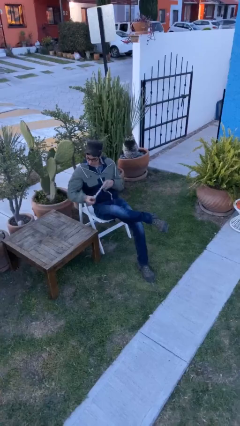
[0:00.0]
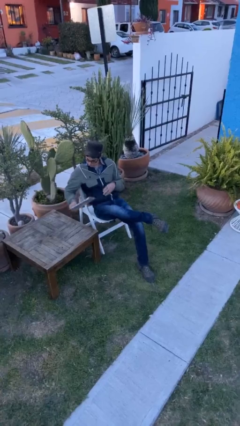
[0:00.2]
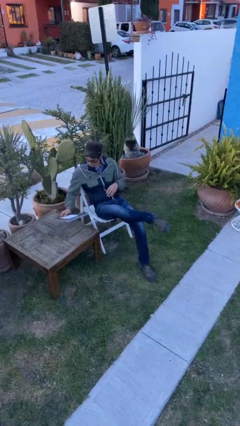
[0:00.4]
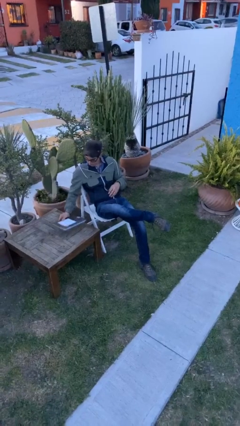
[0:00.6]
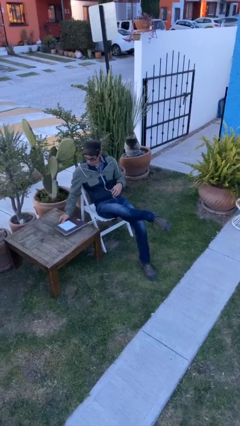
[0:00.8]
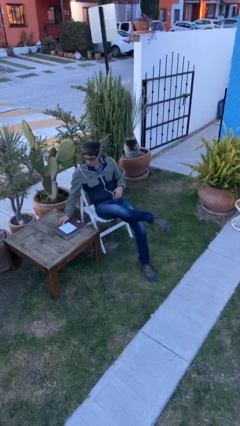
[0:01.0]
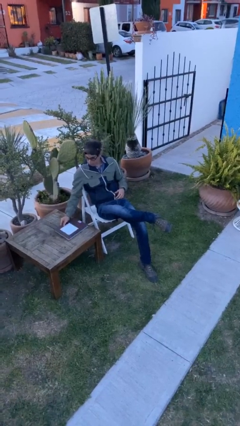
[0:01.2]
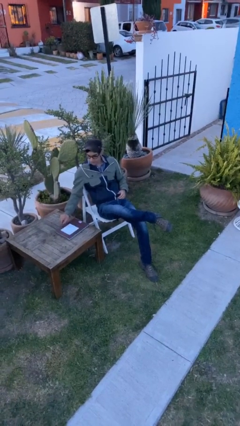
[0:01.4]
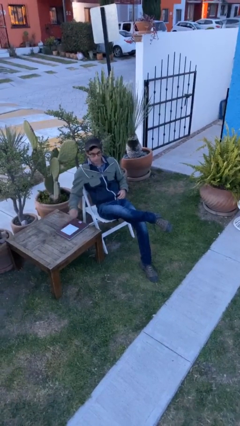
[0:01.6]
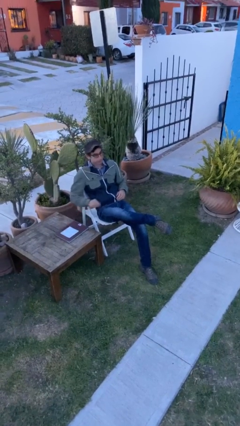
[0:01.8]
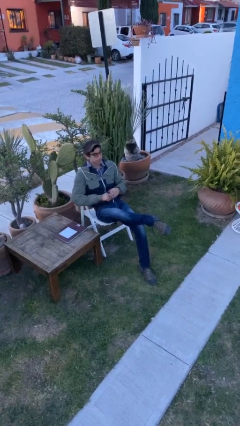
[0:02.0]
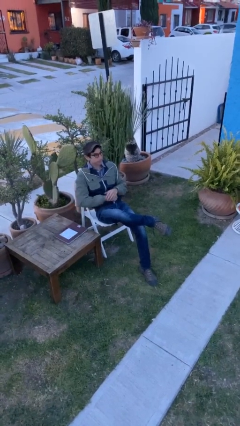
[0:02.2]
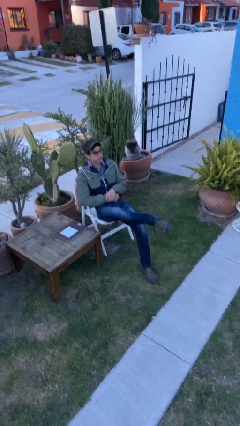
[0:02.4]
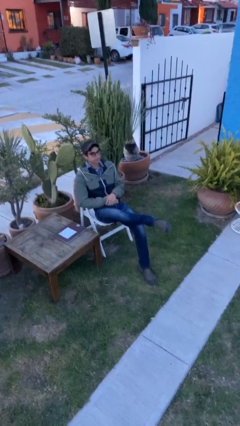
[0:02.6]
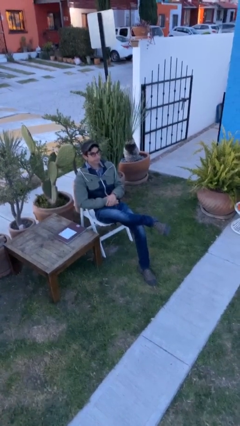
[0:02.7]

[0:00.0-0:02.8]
person puts down object on table

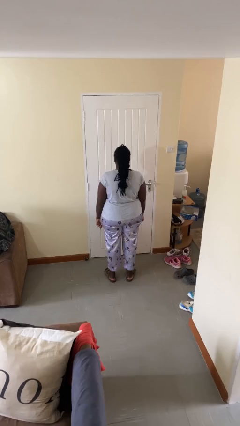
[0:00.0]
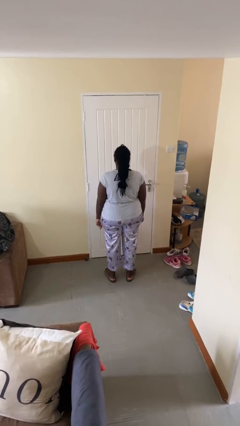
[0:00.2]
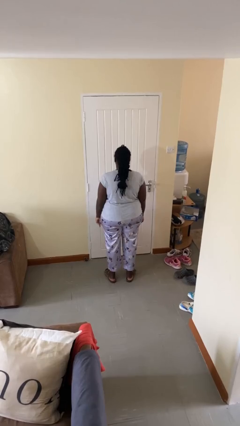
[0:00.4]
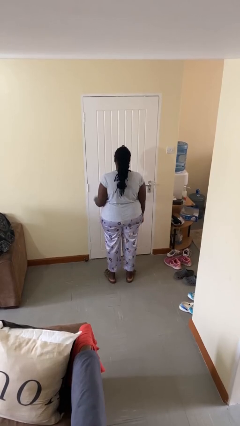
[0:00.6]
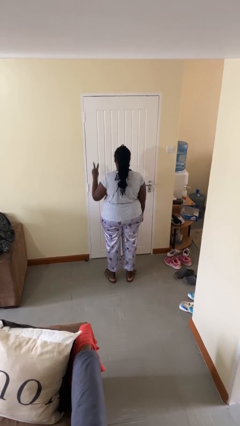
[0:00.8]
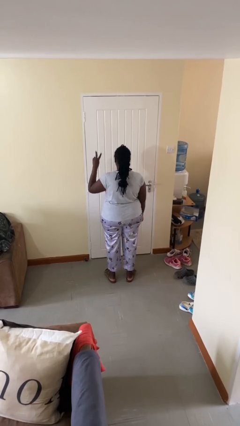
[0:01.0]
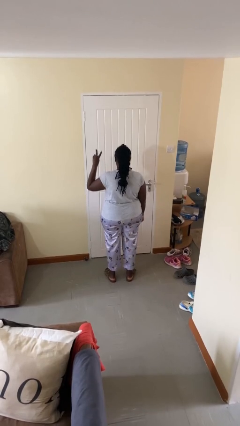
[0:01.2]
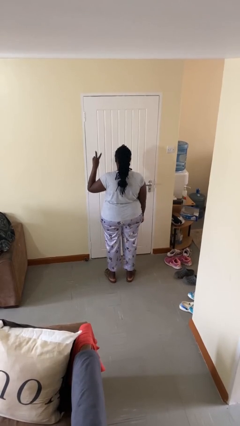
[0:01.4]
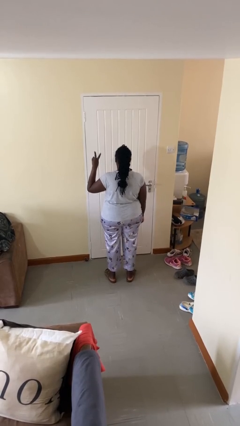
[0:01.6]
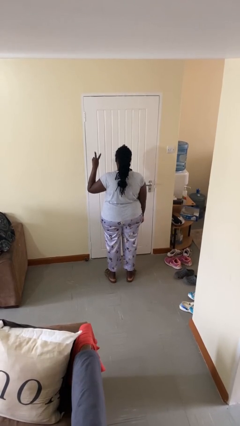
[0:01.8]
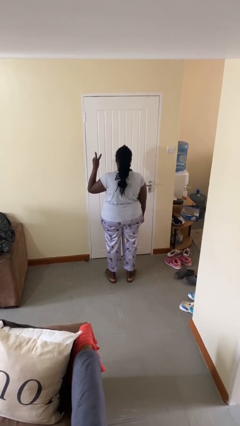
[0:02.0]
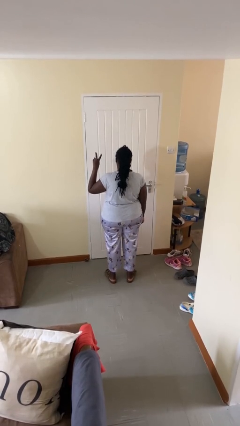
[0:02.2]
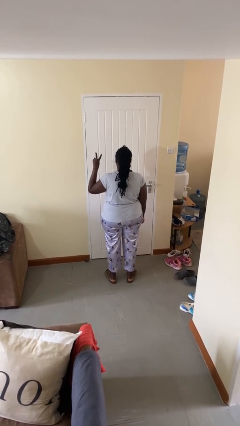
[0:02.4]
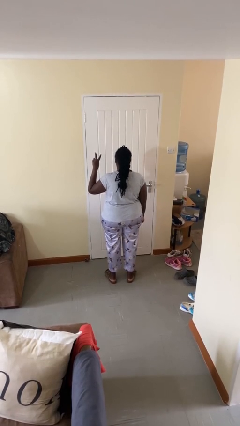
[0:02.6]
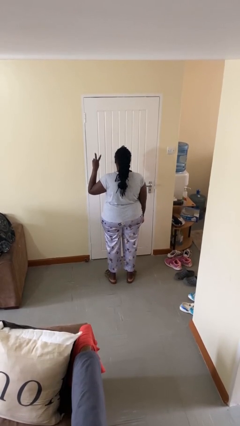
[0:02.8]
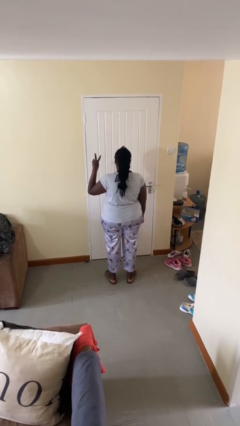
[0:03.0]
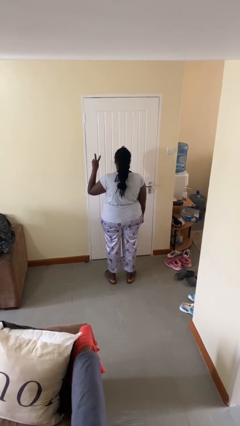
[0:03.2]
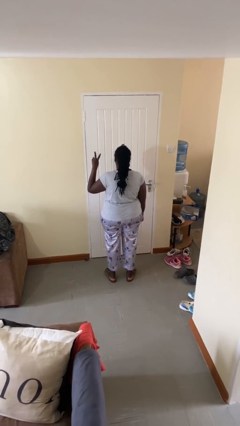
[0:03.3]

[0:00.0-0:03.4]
person gestures peace

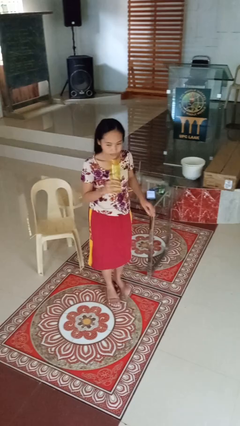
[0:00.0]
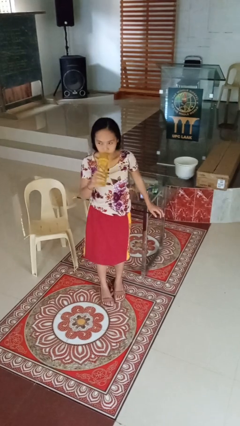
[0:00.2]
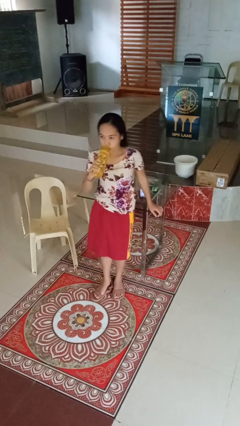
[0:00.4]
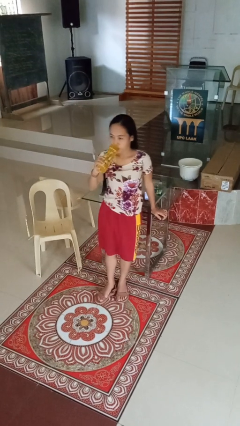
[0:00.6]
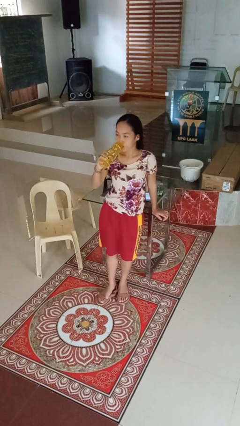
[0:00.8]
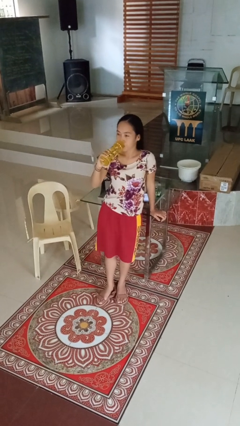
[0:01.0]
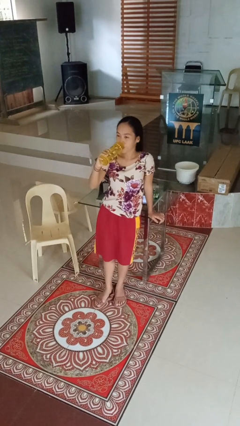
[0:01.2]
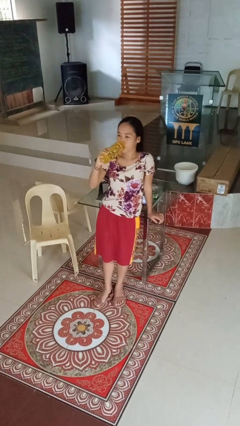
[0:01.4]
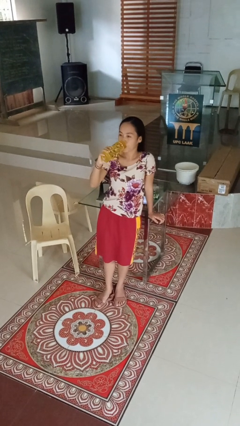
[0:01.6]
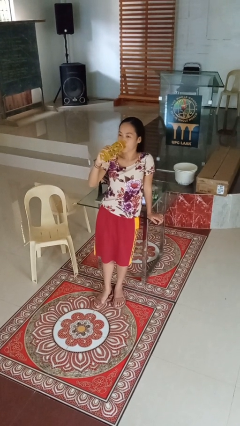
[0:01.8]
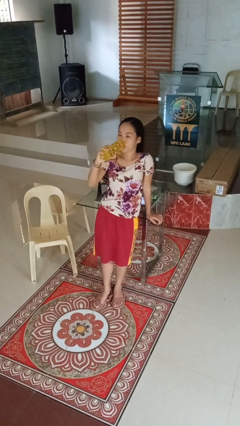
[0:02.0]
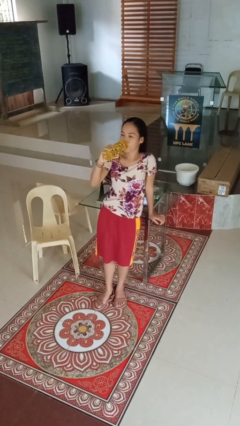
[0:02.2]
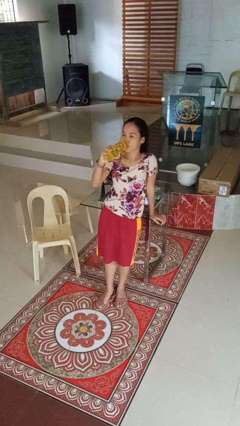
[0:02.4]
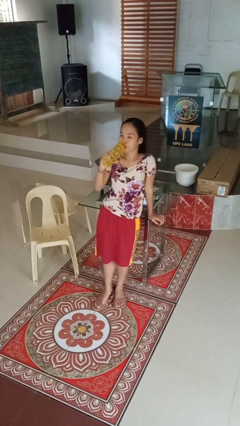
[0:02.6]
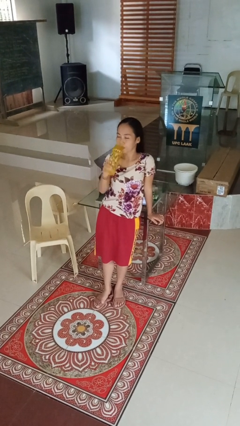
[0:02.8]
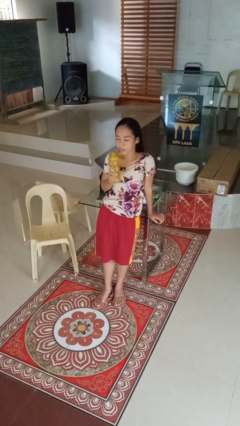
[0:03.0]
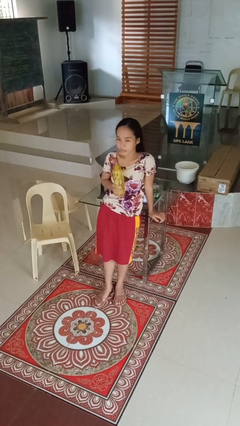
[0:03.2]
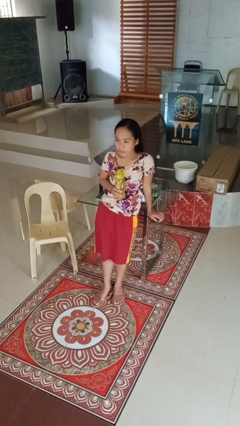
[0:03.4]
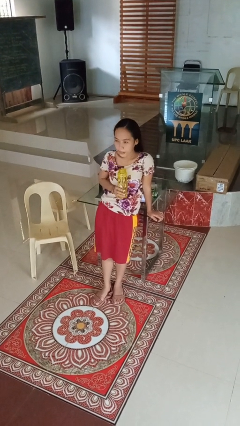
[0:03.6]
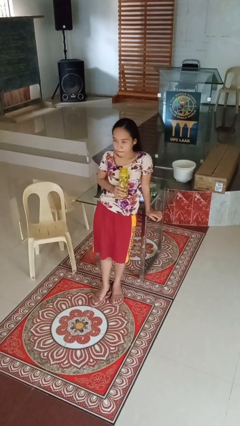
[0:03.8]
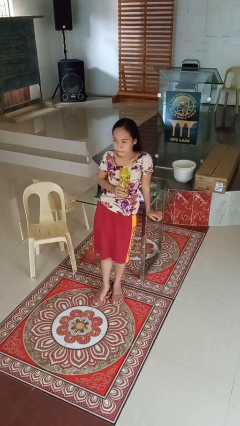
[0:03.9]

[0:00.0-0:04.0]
person drinks from bottle

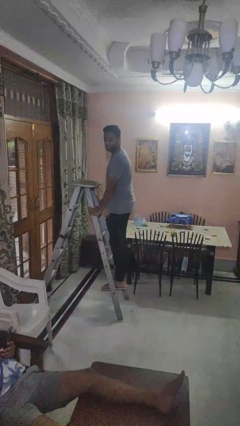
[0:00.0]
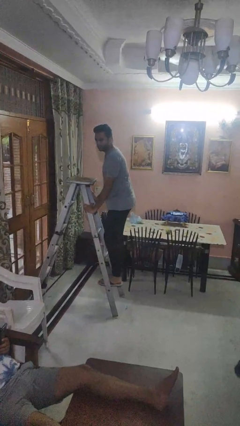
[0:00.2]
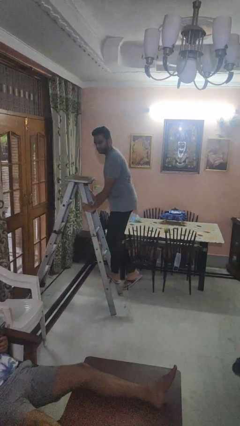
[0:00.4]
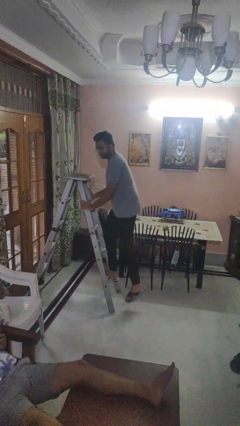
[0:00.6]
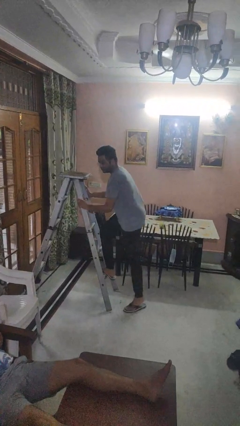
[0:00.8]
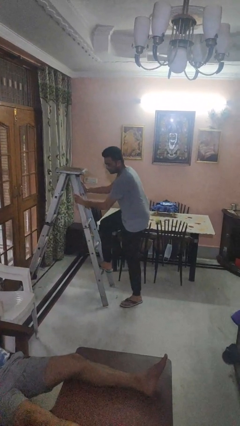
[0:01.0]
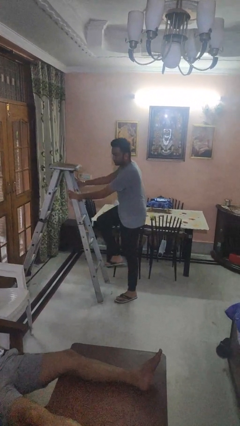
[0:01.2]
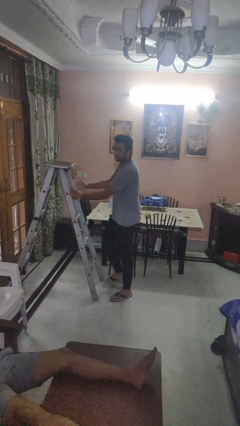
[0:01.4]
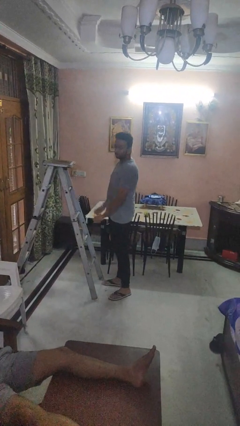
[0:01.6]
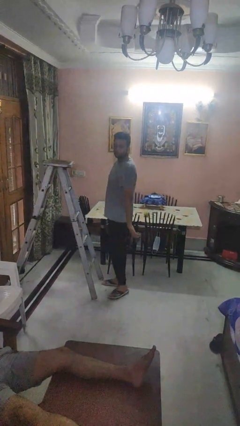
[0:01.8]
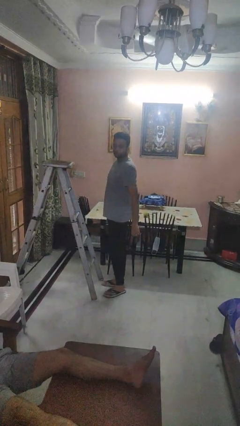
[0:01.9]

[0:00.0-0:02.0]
person climbs down ladder

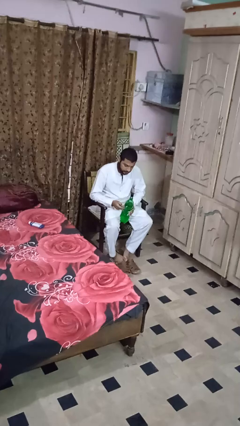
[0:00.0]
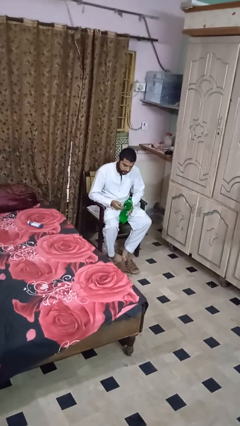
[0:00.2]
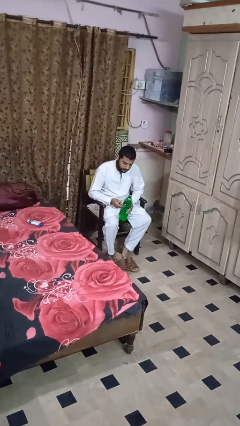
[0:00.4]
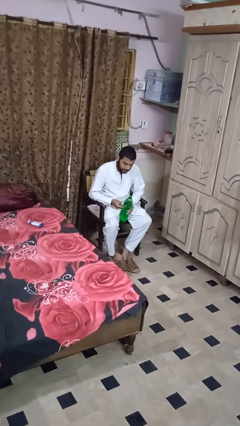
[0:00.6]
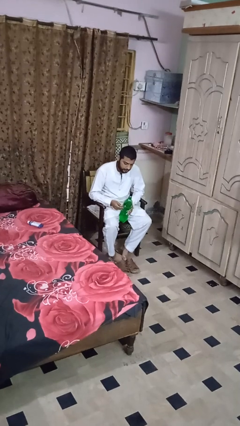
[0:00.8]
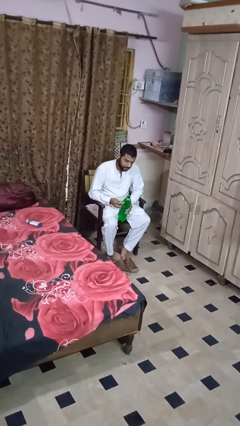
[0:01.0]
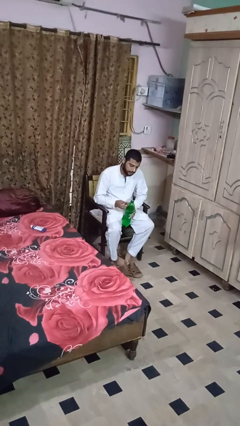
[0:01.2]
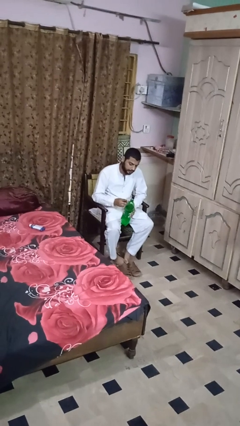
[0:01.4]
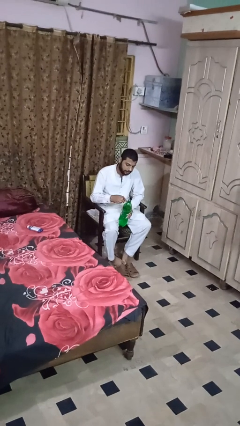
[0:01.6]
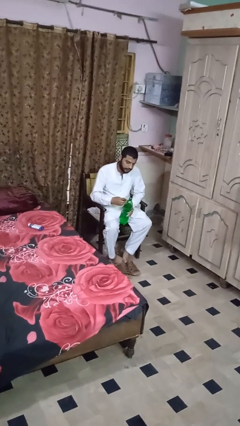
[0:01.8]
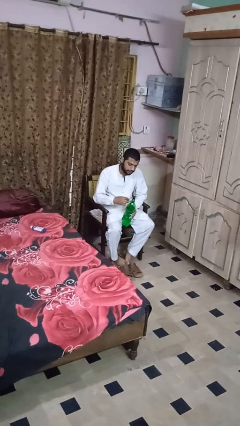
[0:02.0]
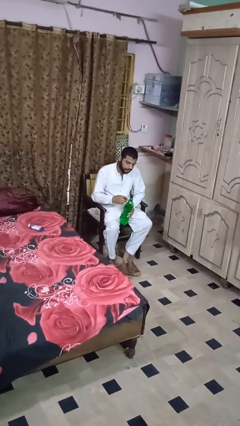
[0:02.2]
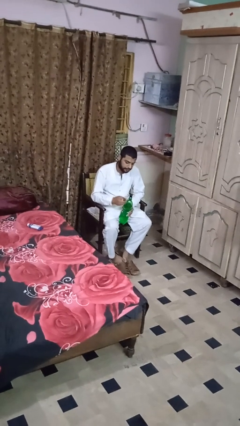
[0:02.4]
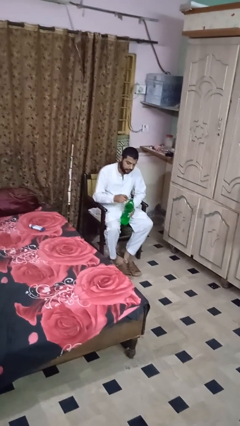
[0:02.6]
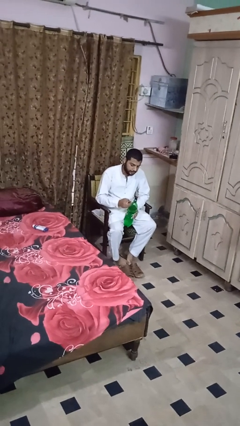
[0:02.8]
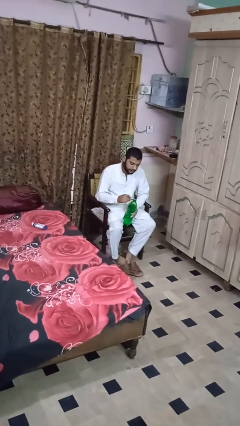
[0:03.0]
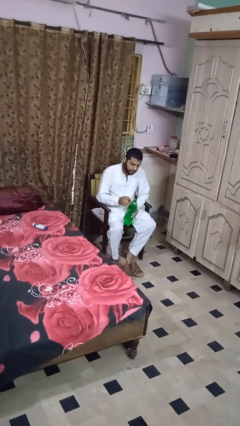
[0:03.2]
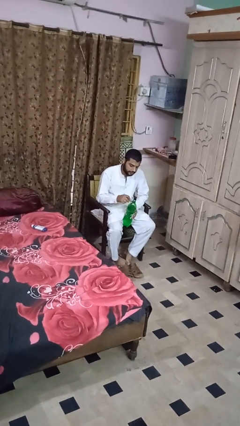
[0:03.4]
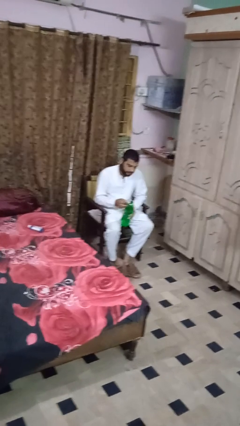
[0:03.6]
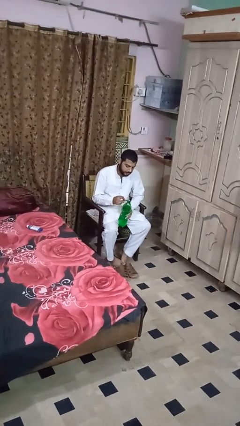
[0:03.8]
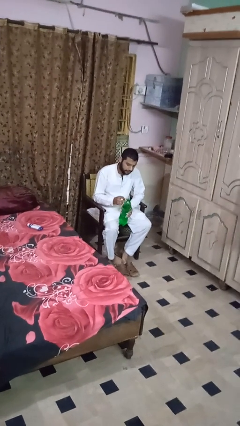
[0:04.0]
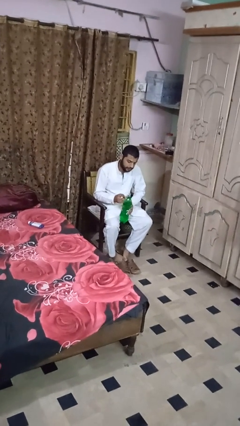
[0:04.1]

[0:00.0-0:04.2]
person opens can with can opener

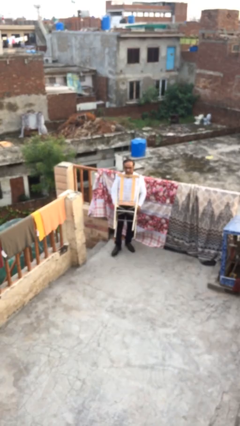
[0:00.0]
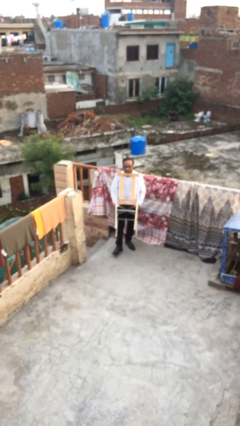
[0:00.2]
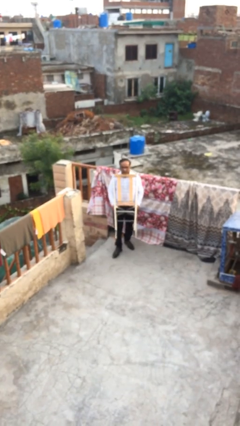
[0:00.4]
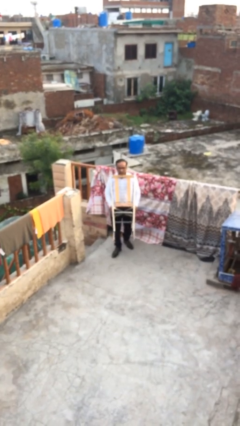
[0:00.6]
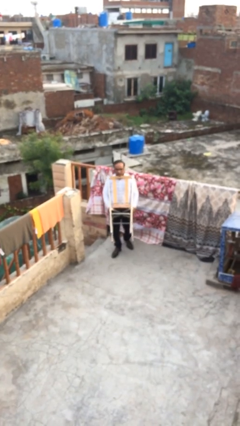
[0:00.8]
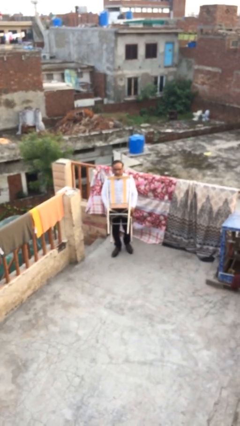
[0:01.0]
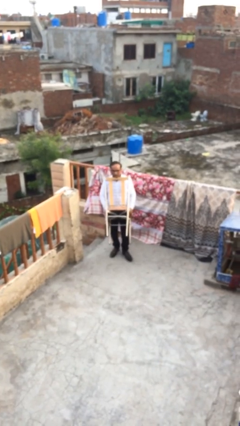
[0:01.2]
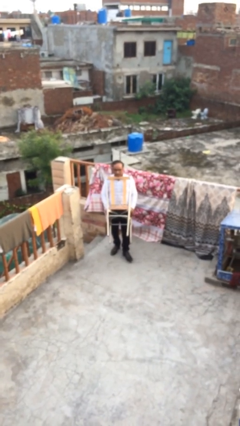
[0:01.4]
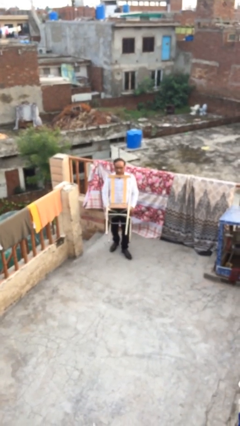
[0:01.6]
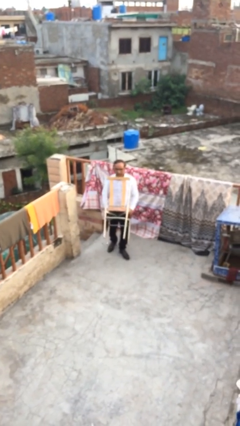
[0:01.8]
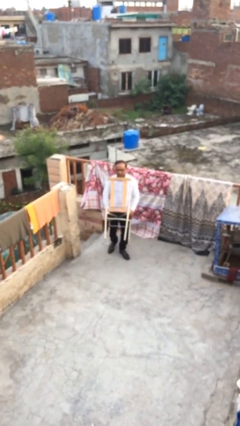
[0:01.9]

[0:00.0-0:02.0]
person carries heavy object
